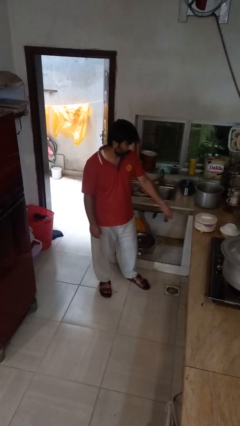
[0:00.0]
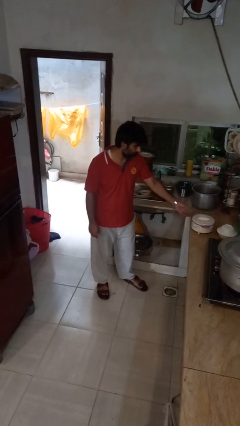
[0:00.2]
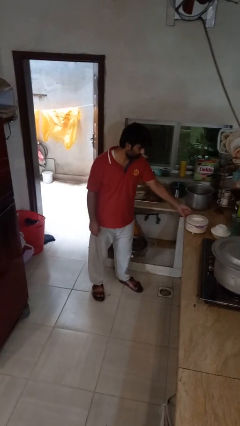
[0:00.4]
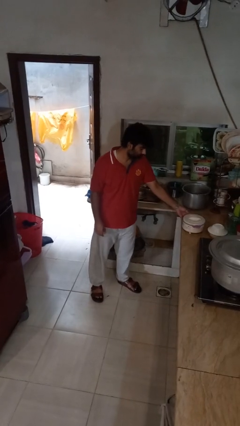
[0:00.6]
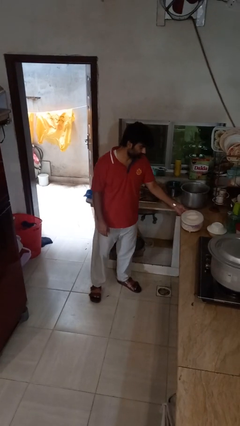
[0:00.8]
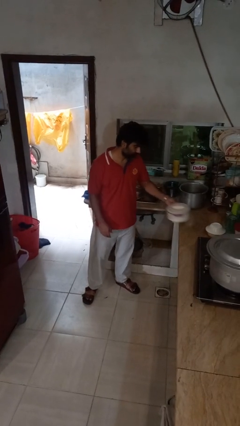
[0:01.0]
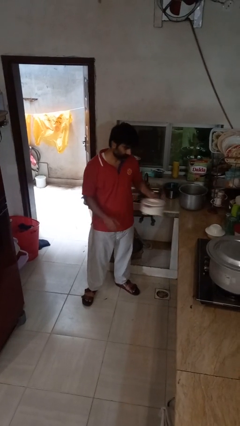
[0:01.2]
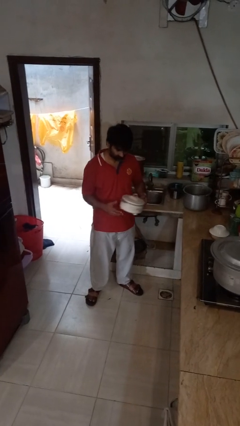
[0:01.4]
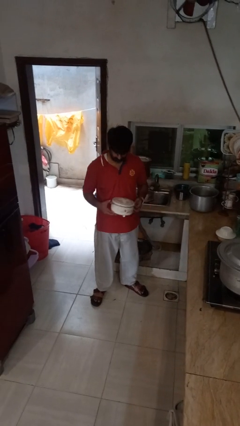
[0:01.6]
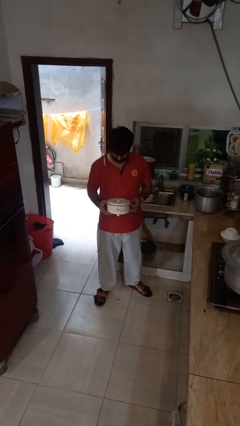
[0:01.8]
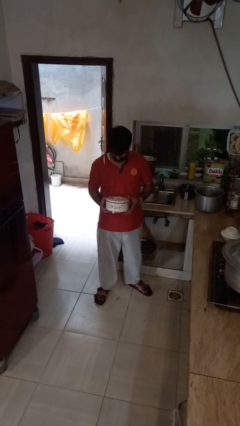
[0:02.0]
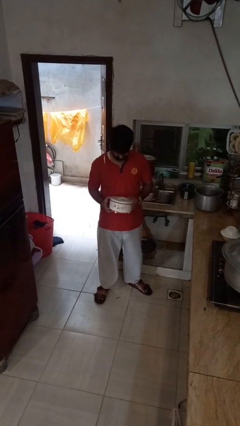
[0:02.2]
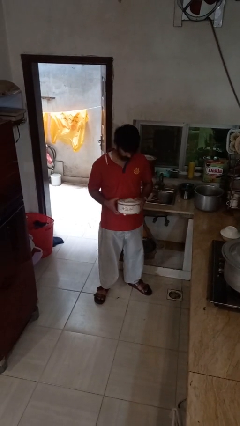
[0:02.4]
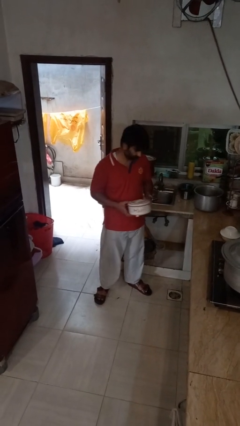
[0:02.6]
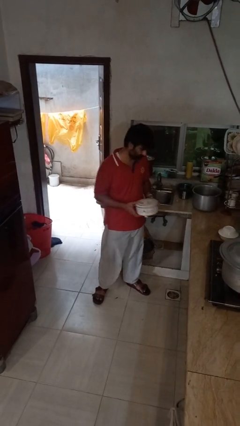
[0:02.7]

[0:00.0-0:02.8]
person picks up object from countertop

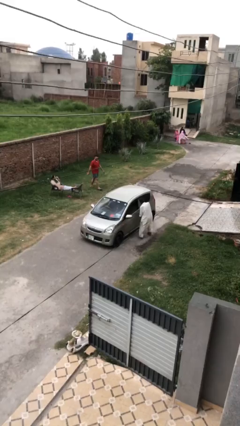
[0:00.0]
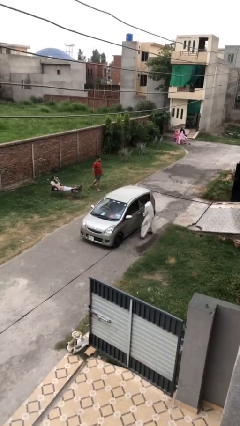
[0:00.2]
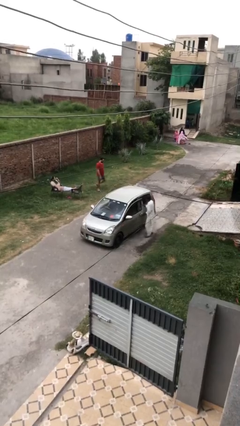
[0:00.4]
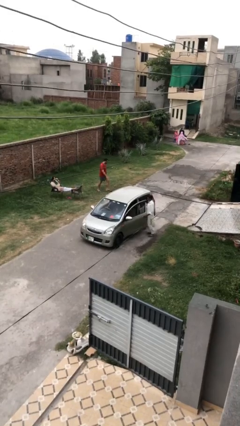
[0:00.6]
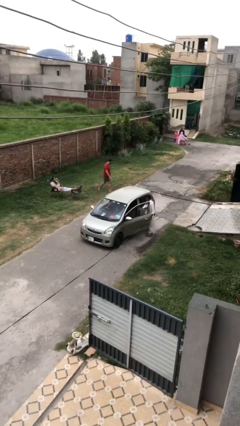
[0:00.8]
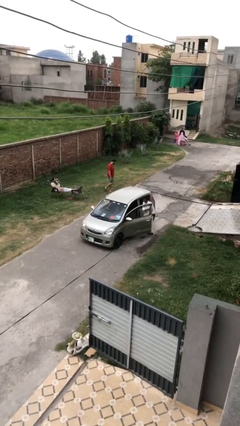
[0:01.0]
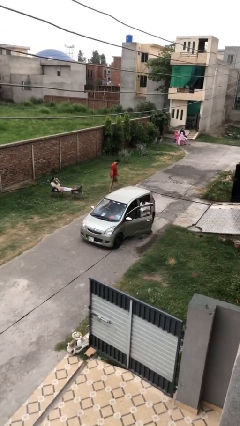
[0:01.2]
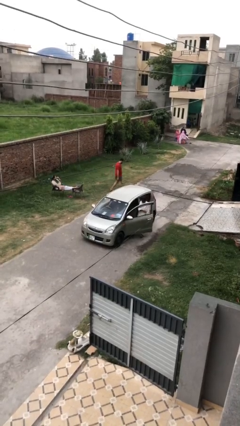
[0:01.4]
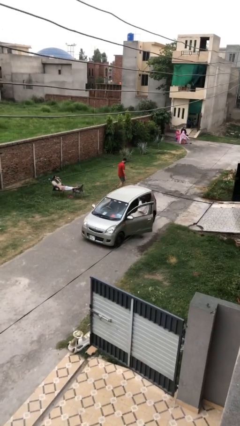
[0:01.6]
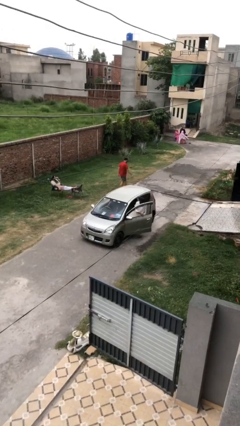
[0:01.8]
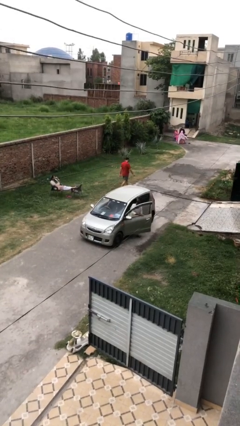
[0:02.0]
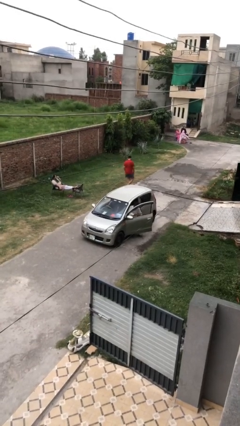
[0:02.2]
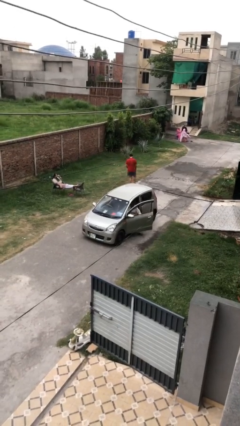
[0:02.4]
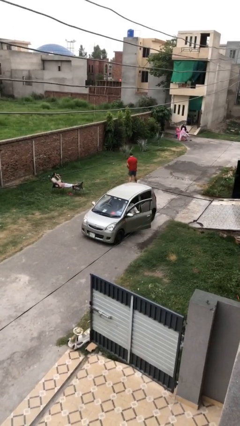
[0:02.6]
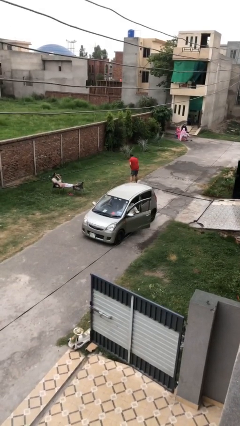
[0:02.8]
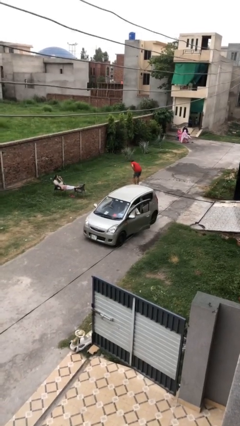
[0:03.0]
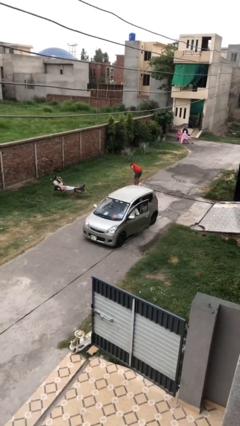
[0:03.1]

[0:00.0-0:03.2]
car picks up person

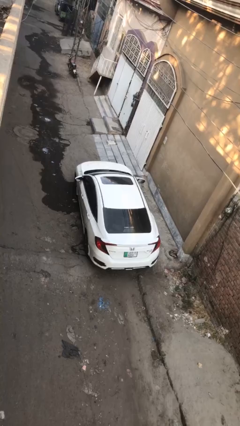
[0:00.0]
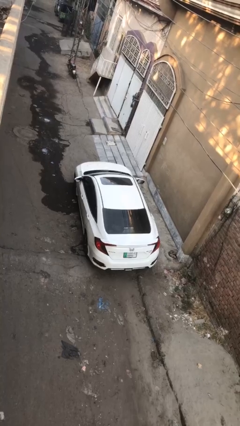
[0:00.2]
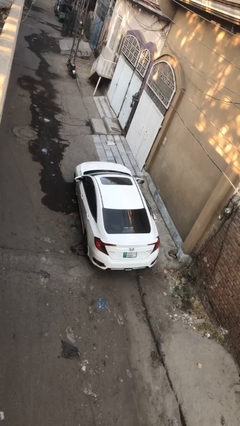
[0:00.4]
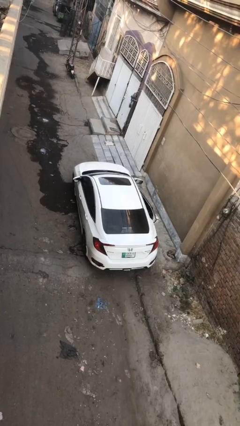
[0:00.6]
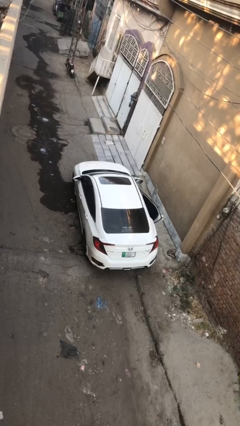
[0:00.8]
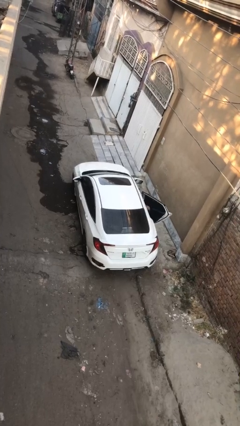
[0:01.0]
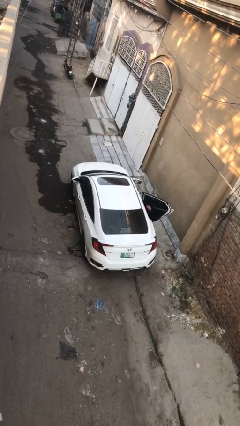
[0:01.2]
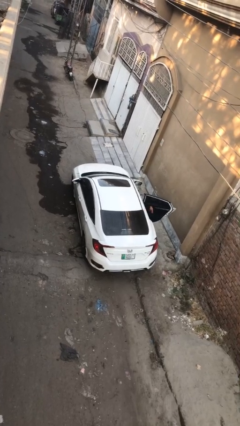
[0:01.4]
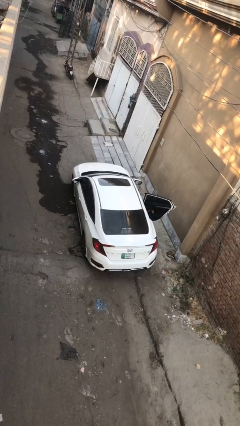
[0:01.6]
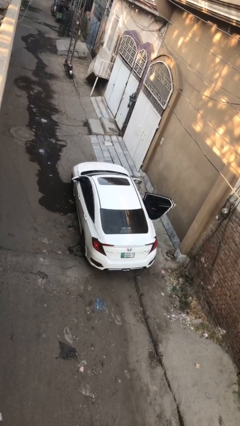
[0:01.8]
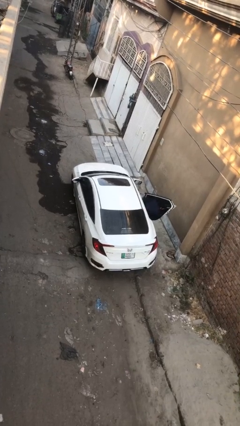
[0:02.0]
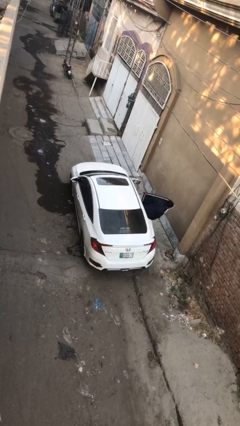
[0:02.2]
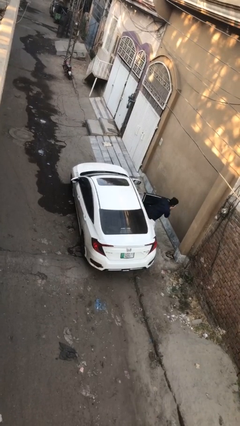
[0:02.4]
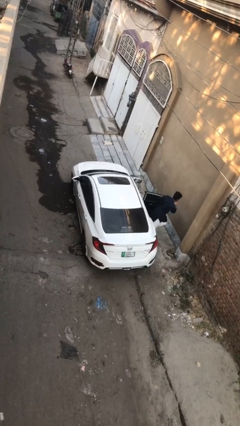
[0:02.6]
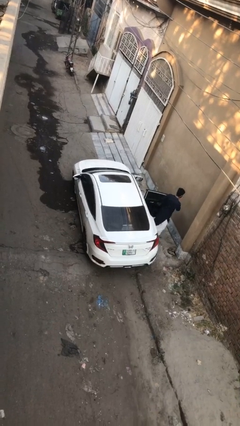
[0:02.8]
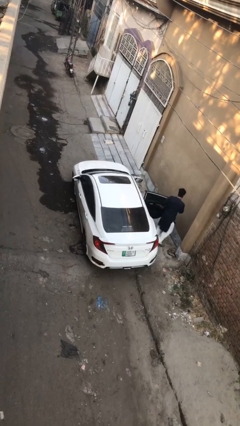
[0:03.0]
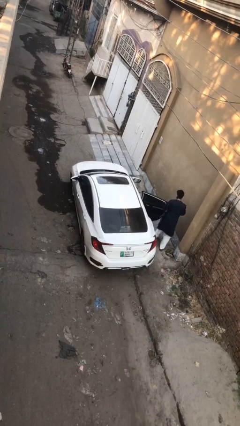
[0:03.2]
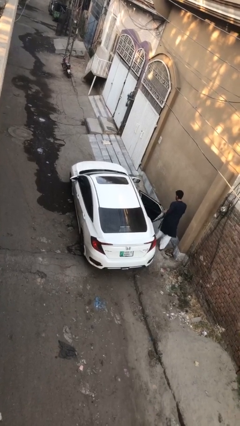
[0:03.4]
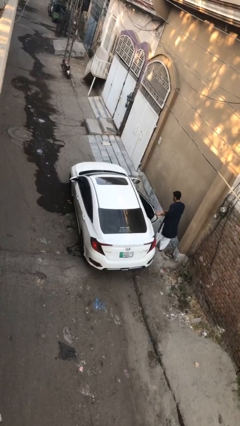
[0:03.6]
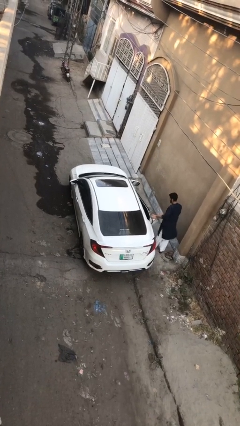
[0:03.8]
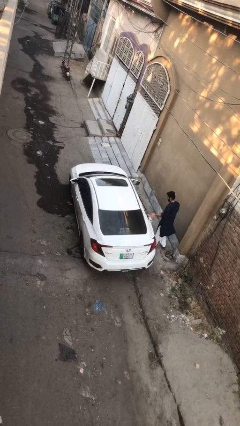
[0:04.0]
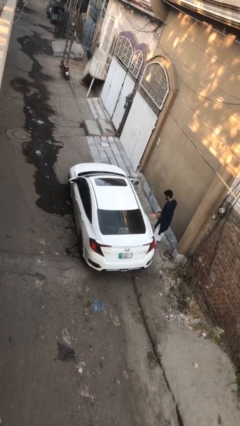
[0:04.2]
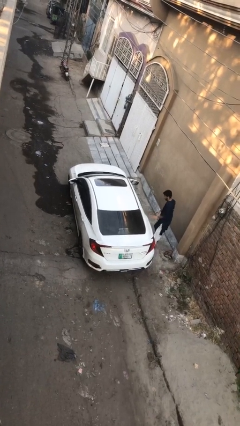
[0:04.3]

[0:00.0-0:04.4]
car drops off person

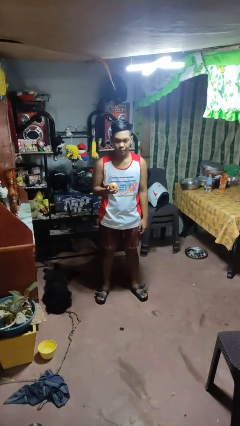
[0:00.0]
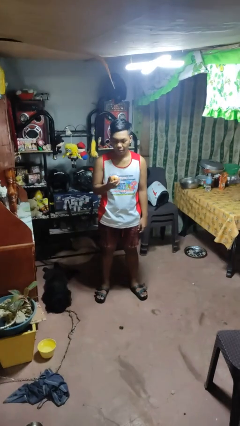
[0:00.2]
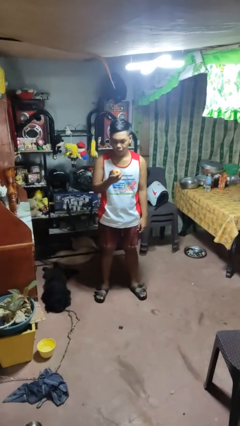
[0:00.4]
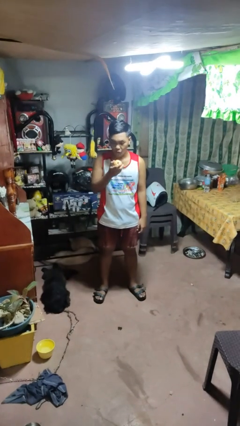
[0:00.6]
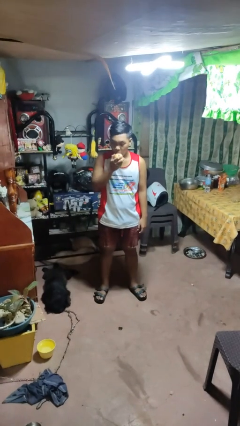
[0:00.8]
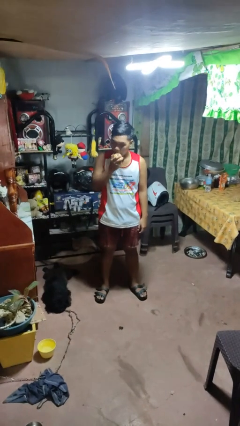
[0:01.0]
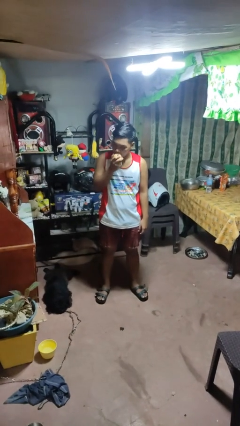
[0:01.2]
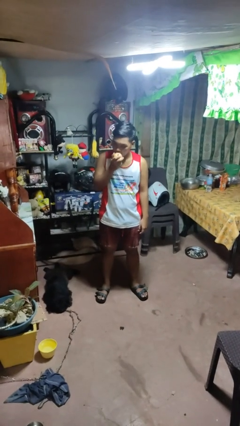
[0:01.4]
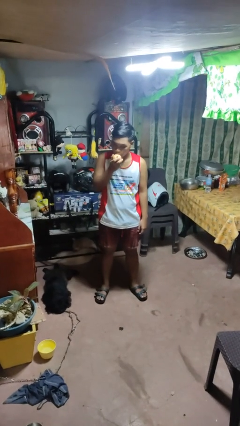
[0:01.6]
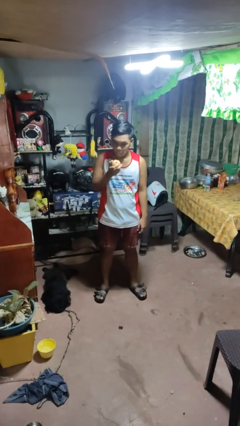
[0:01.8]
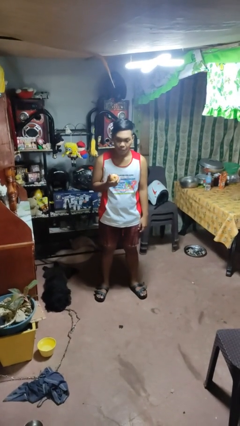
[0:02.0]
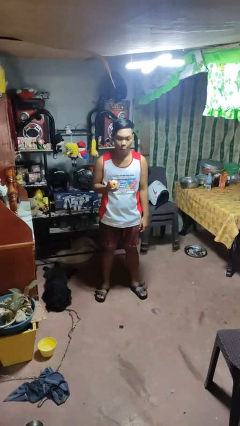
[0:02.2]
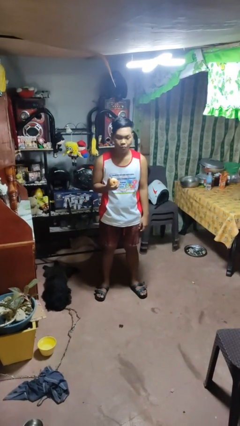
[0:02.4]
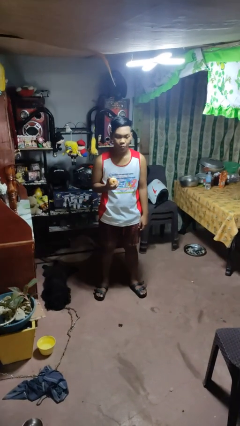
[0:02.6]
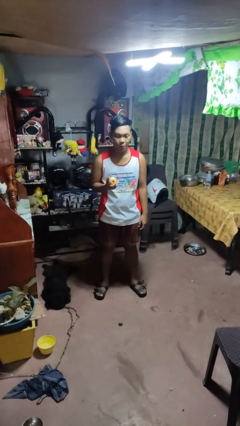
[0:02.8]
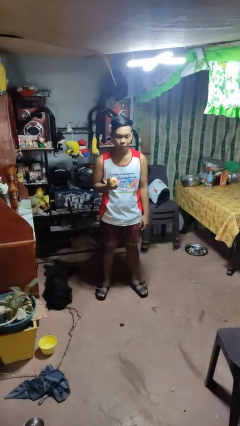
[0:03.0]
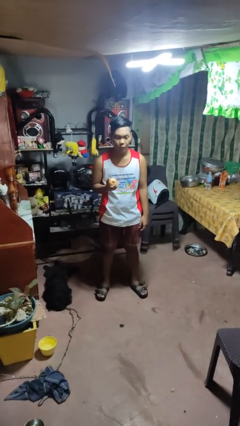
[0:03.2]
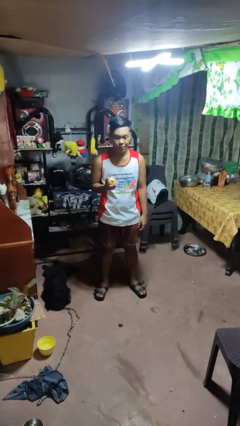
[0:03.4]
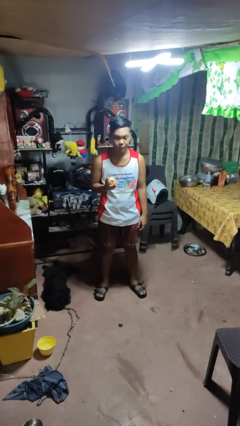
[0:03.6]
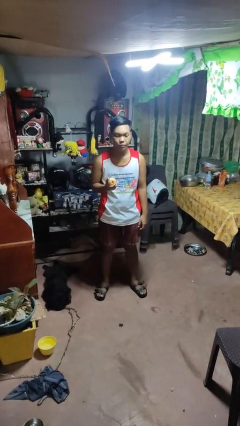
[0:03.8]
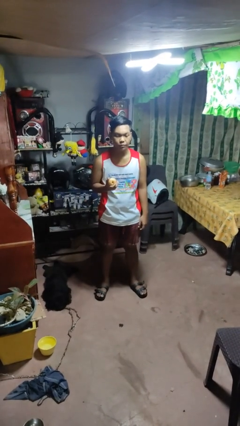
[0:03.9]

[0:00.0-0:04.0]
person eats apple

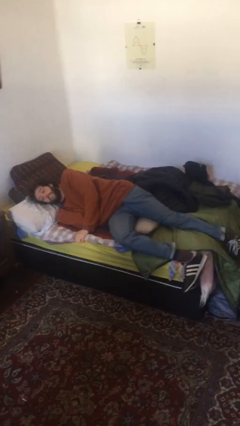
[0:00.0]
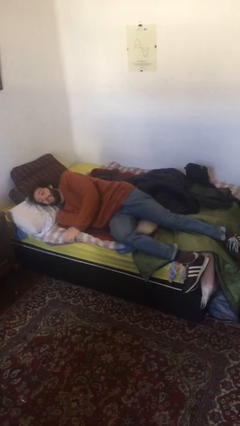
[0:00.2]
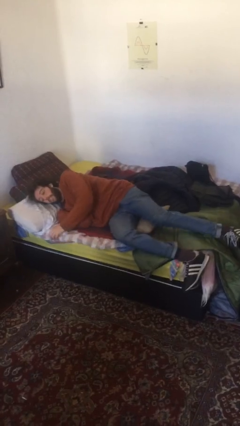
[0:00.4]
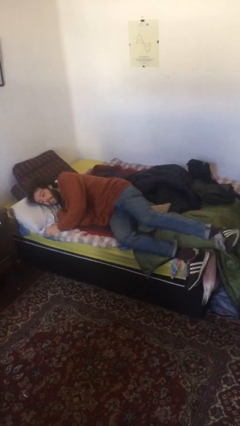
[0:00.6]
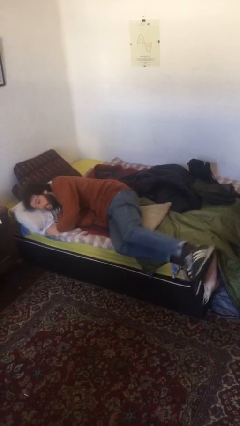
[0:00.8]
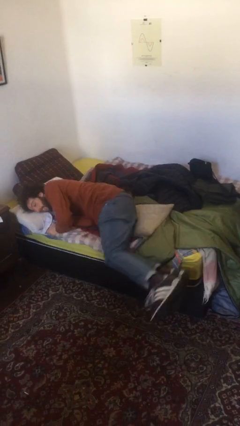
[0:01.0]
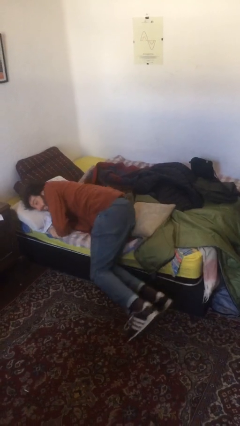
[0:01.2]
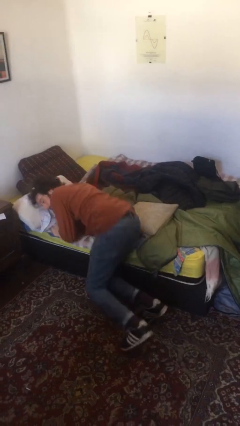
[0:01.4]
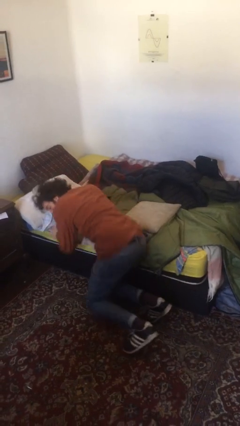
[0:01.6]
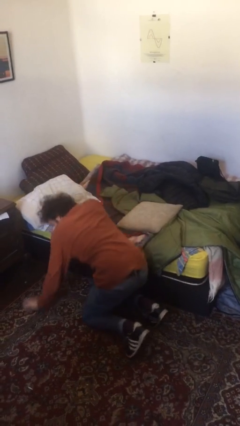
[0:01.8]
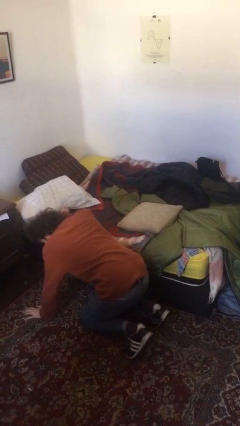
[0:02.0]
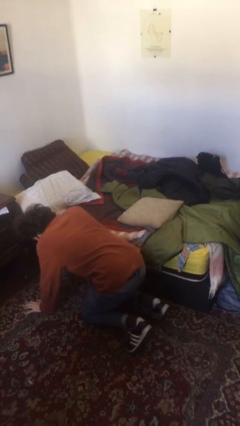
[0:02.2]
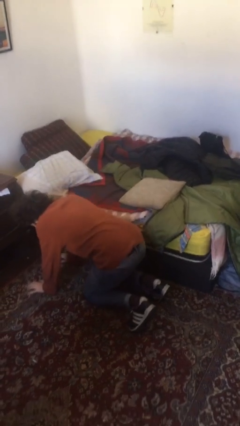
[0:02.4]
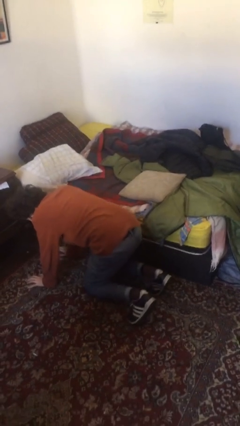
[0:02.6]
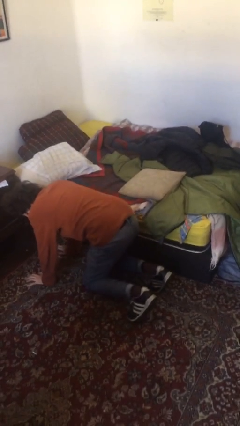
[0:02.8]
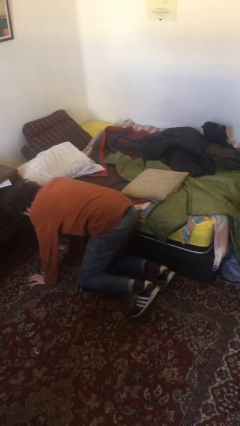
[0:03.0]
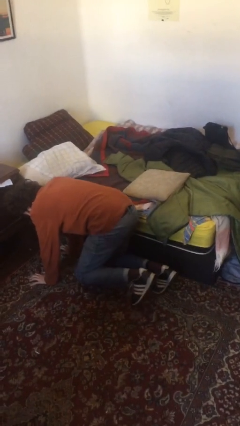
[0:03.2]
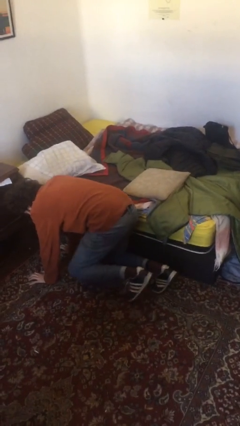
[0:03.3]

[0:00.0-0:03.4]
person falls from bed

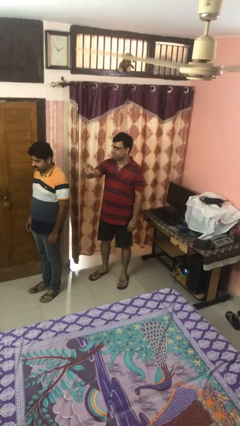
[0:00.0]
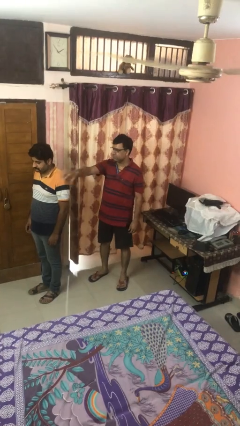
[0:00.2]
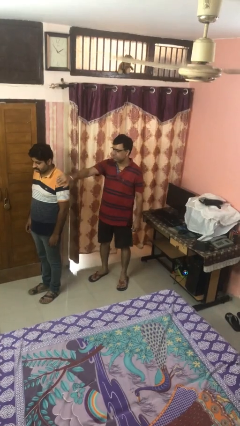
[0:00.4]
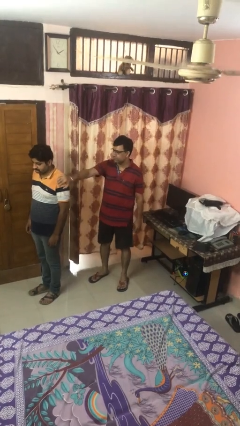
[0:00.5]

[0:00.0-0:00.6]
person grabs person by shoulder
